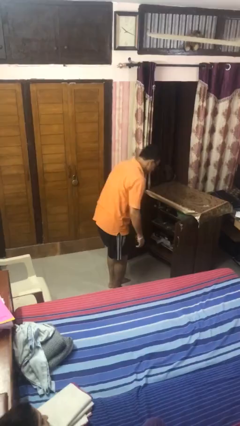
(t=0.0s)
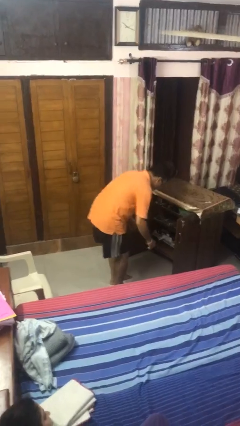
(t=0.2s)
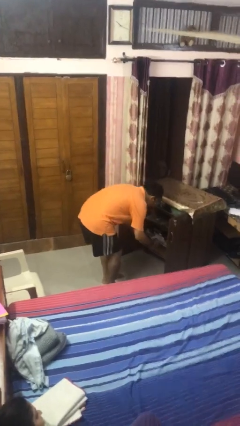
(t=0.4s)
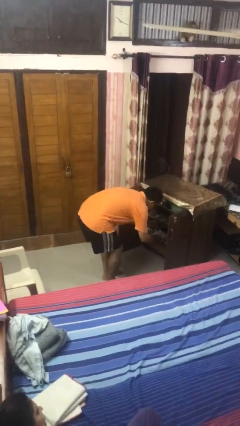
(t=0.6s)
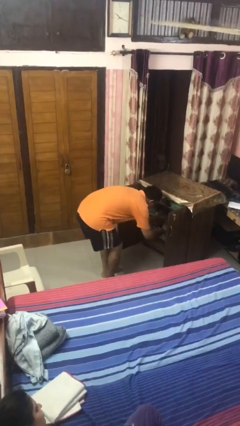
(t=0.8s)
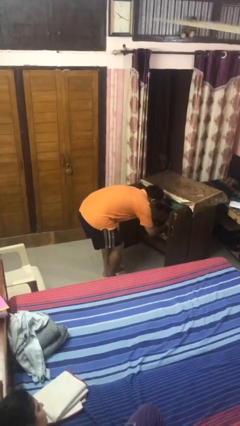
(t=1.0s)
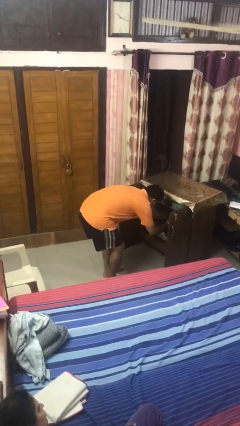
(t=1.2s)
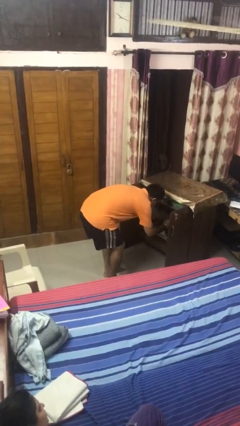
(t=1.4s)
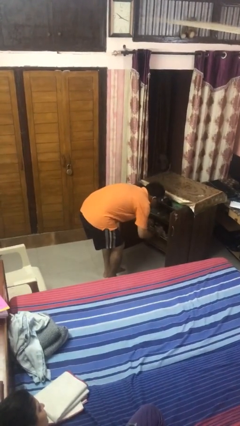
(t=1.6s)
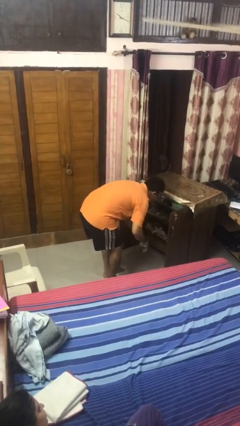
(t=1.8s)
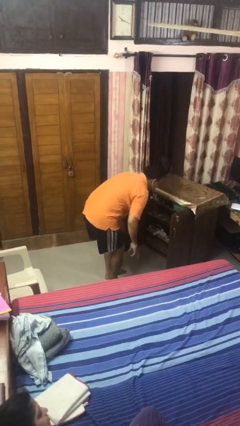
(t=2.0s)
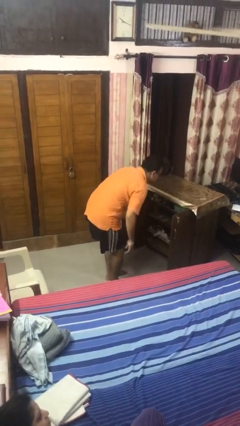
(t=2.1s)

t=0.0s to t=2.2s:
person searches in cabinet

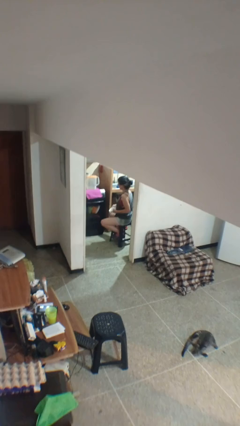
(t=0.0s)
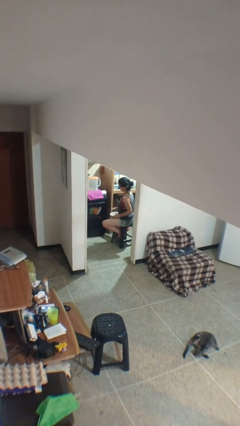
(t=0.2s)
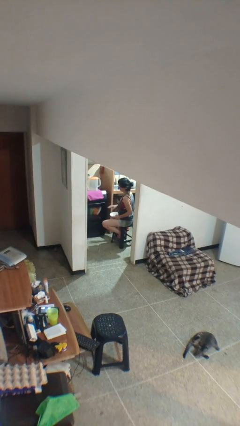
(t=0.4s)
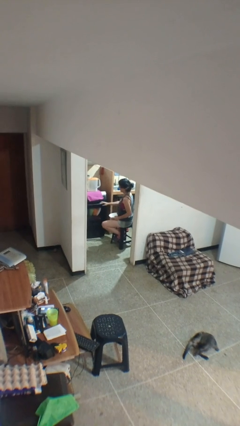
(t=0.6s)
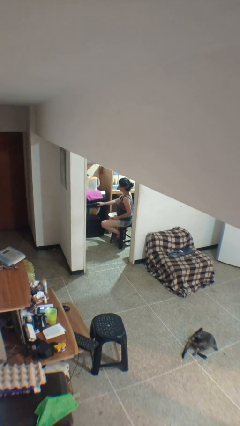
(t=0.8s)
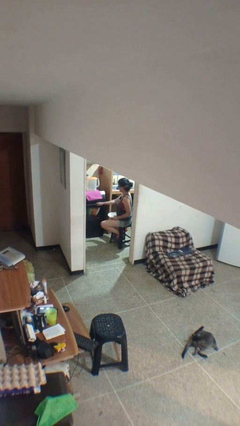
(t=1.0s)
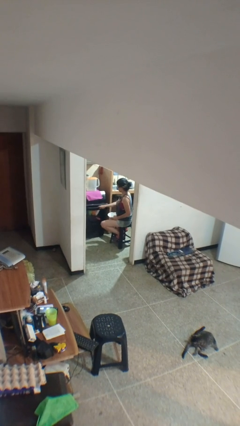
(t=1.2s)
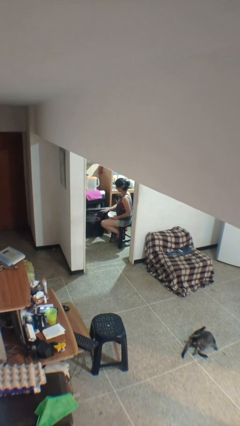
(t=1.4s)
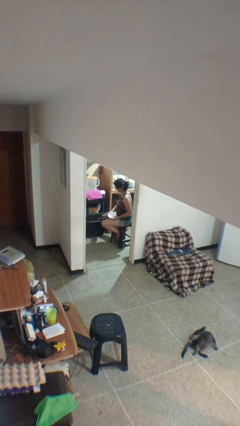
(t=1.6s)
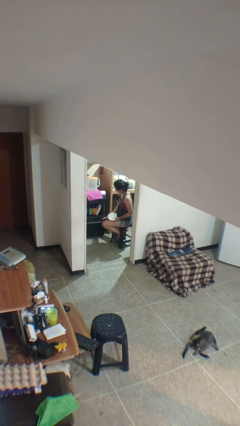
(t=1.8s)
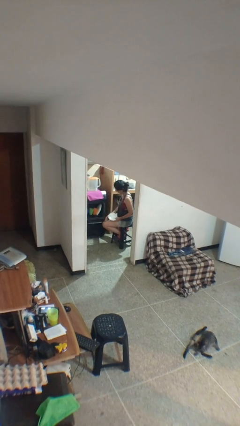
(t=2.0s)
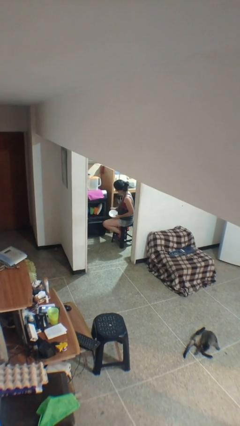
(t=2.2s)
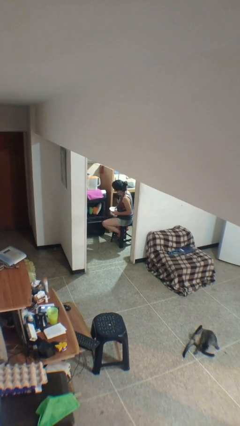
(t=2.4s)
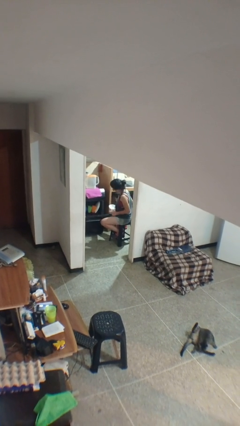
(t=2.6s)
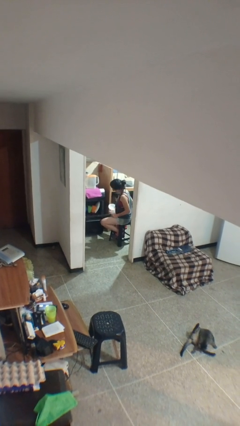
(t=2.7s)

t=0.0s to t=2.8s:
person opens dishwasher

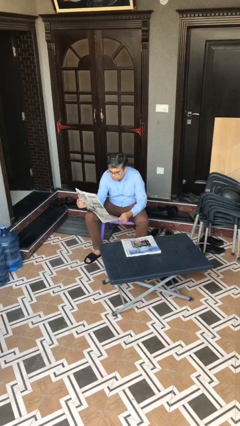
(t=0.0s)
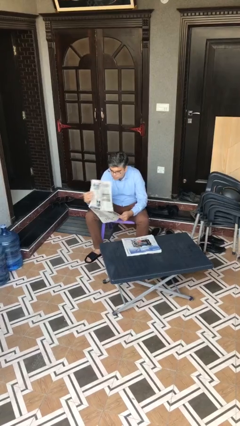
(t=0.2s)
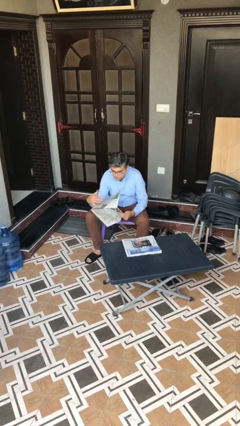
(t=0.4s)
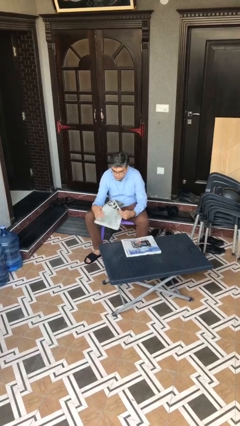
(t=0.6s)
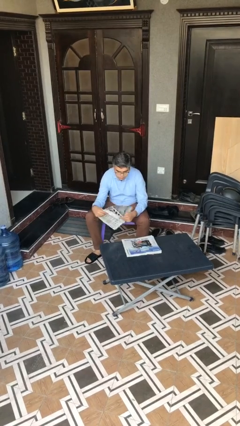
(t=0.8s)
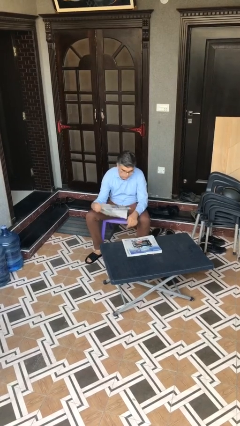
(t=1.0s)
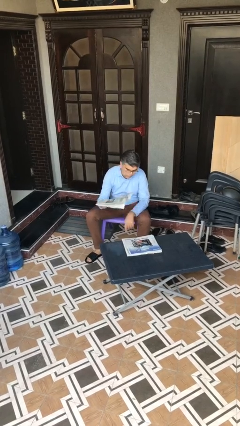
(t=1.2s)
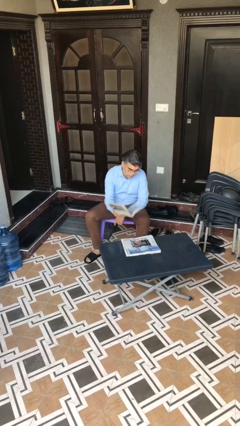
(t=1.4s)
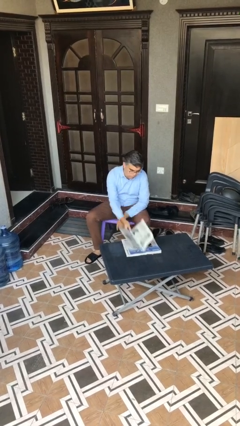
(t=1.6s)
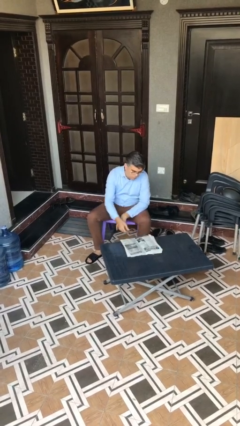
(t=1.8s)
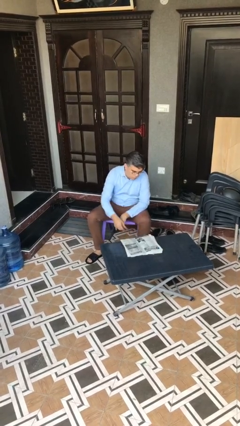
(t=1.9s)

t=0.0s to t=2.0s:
person puts down object on table

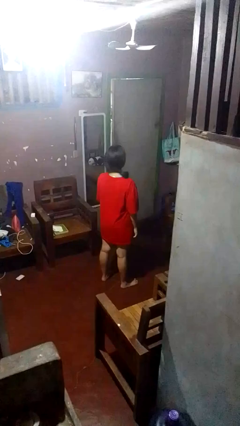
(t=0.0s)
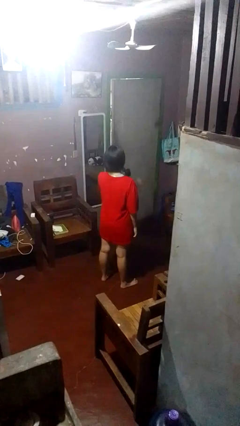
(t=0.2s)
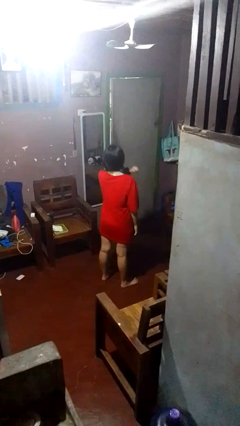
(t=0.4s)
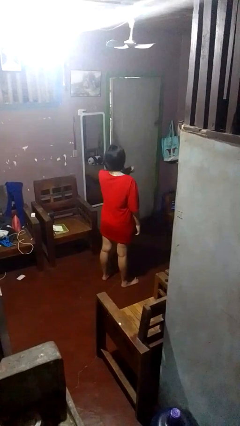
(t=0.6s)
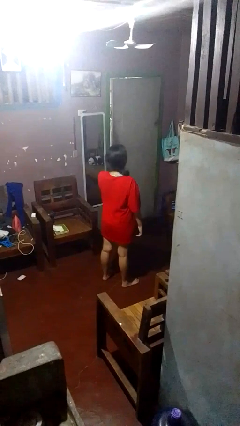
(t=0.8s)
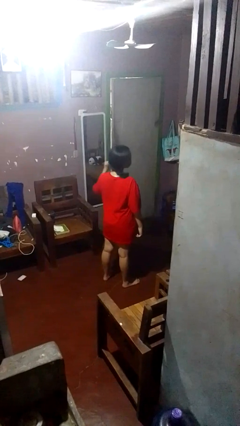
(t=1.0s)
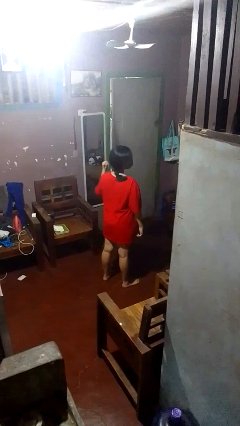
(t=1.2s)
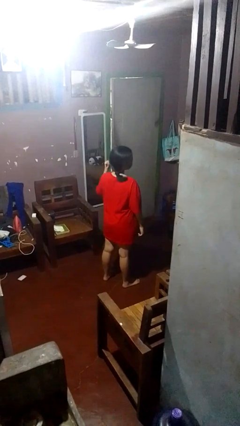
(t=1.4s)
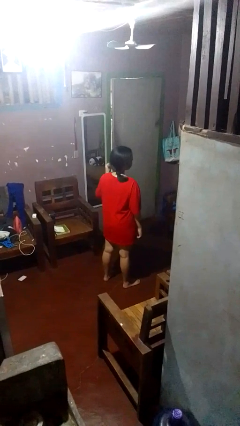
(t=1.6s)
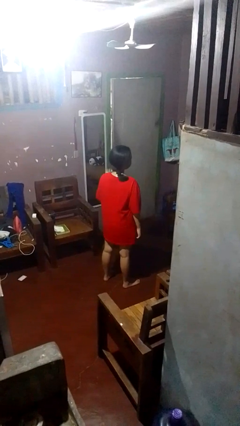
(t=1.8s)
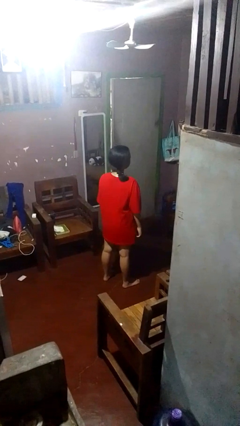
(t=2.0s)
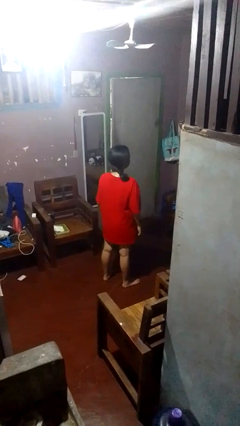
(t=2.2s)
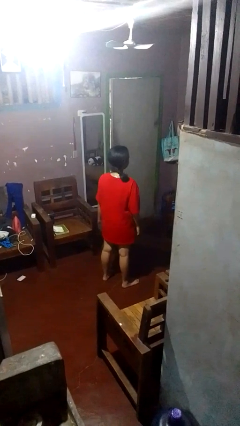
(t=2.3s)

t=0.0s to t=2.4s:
person gestures cut

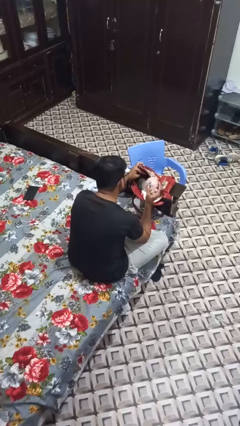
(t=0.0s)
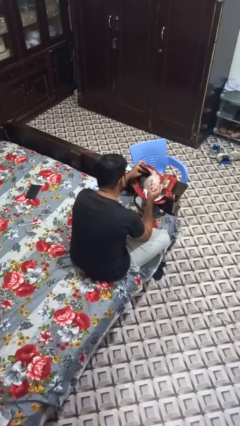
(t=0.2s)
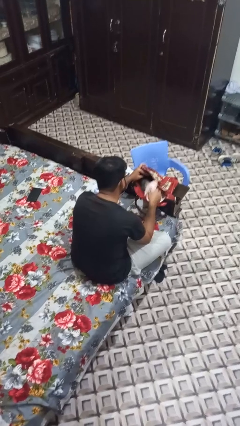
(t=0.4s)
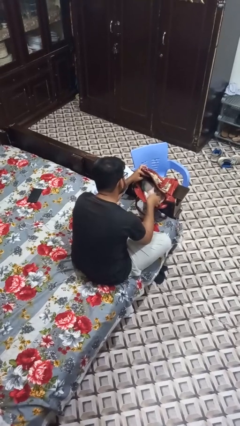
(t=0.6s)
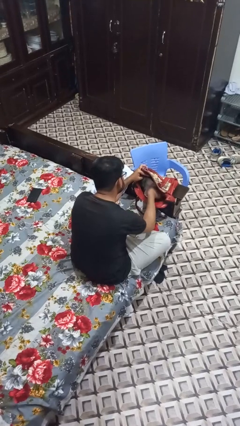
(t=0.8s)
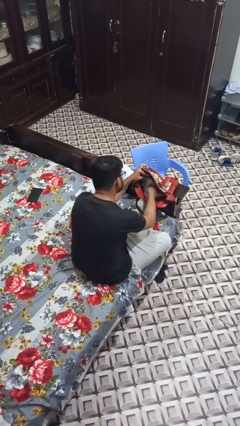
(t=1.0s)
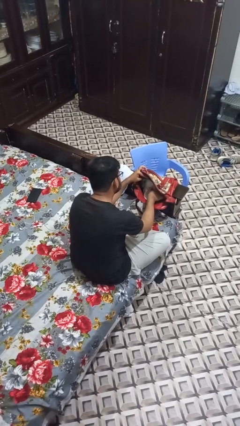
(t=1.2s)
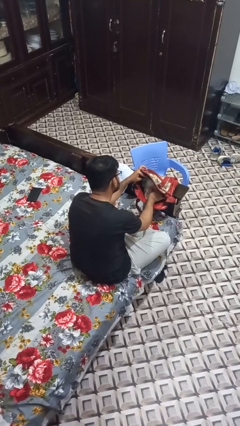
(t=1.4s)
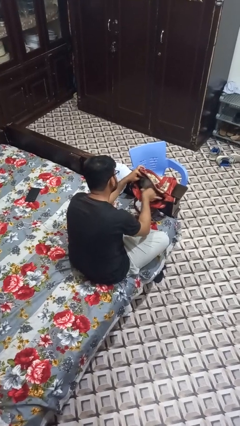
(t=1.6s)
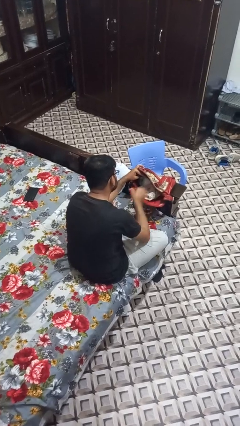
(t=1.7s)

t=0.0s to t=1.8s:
person puts object into purse

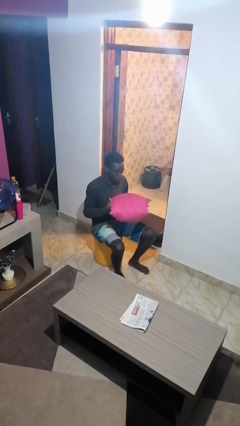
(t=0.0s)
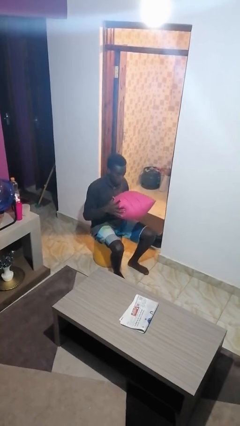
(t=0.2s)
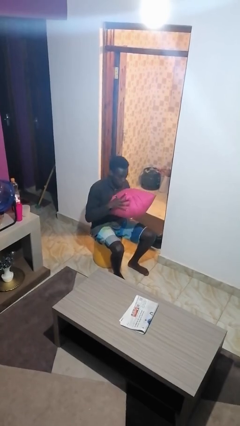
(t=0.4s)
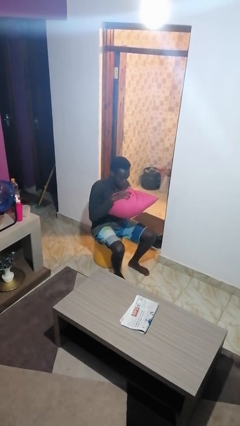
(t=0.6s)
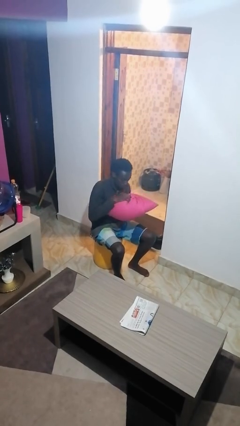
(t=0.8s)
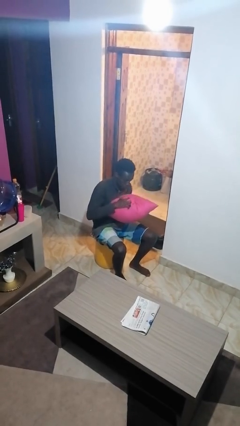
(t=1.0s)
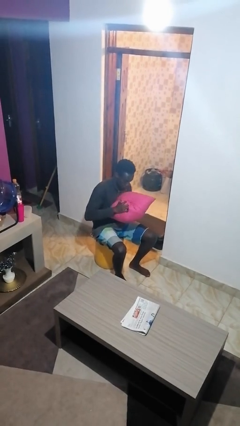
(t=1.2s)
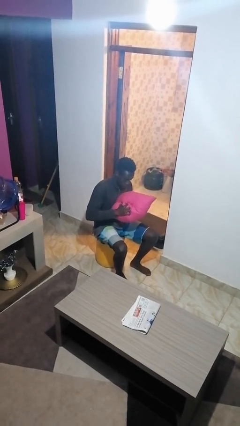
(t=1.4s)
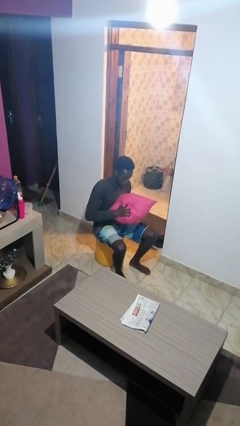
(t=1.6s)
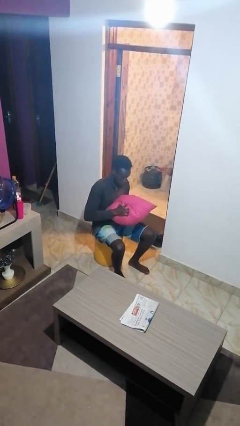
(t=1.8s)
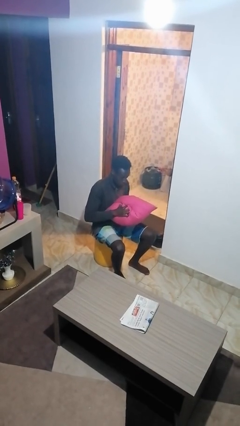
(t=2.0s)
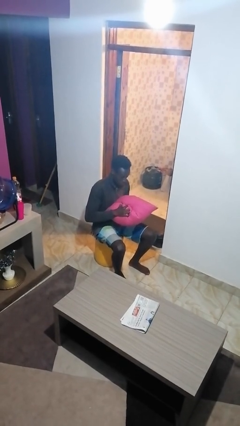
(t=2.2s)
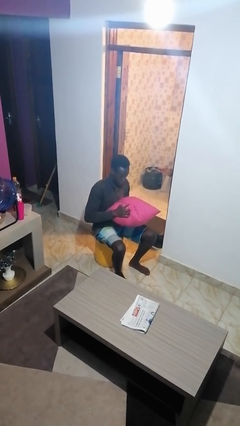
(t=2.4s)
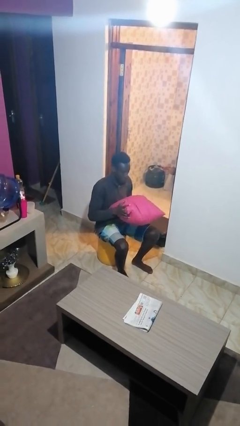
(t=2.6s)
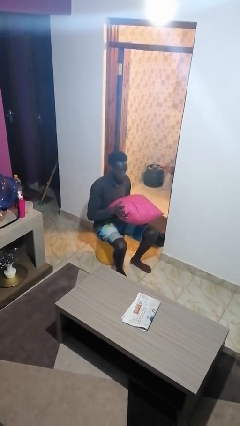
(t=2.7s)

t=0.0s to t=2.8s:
person squeezes object

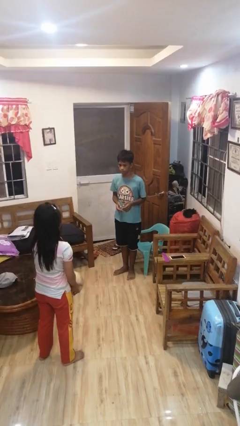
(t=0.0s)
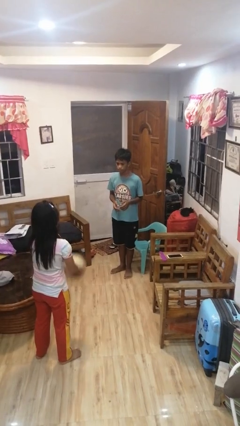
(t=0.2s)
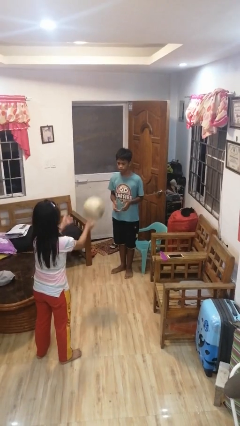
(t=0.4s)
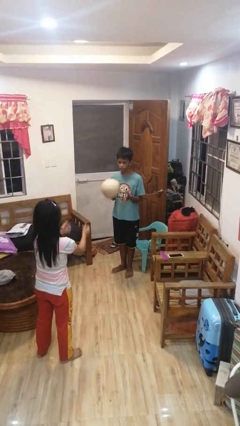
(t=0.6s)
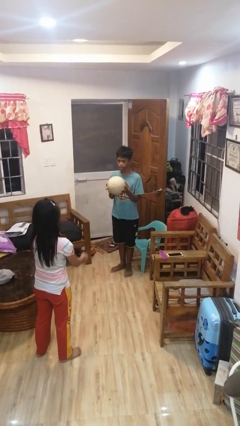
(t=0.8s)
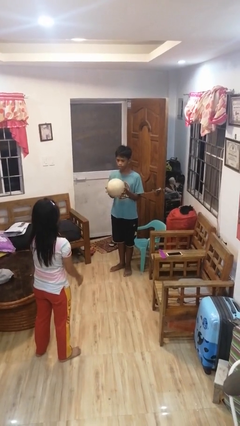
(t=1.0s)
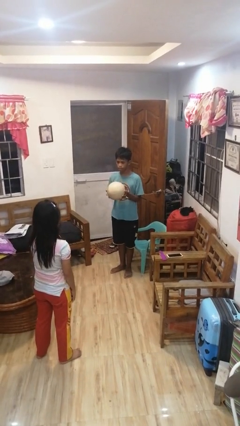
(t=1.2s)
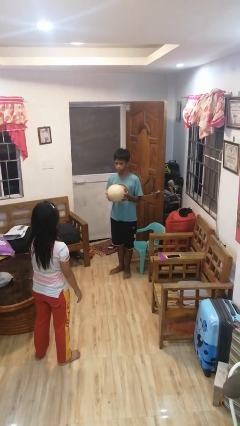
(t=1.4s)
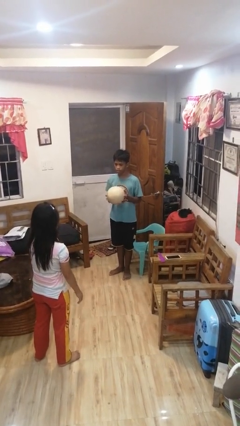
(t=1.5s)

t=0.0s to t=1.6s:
person catches object from person

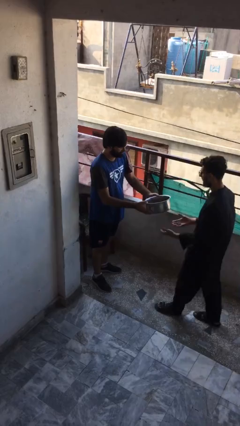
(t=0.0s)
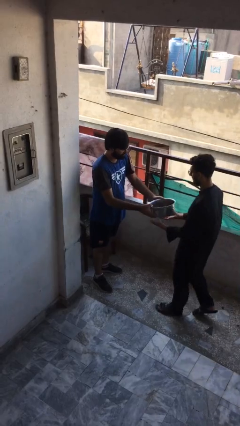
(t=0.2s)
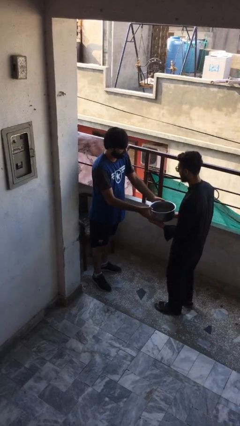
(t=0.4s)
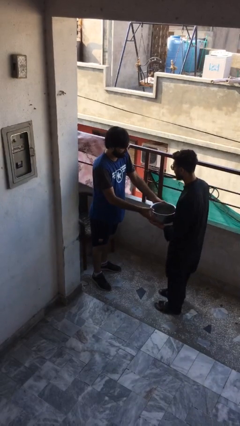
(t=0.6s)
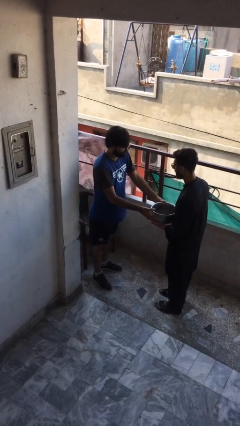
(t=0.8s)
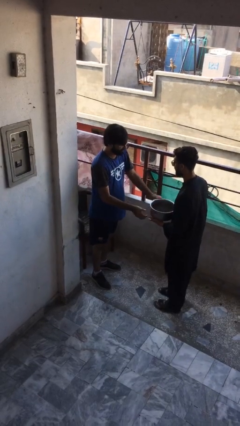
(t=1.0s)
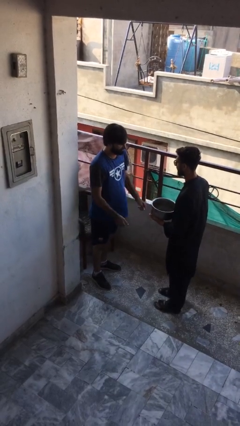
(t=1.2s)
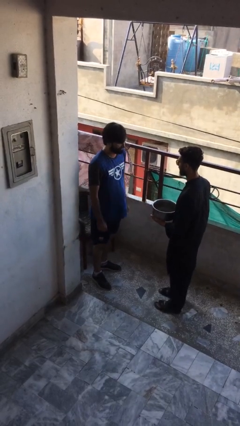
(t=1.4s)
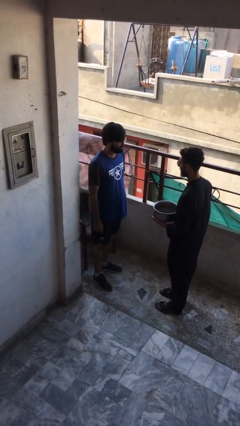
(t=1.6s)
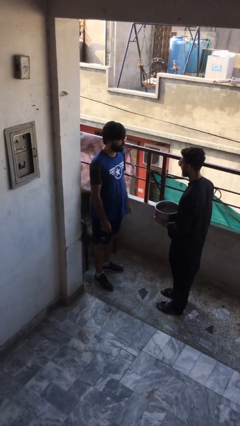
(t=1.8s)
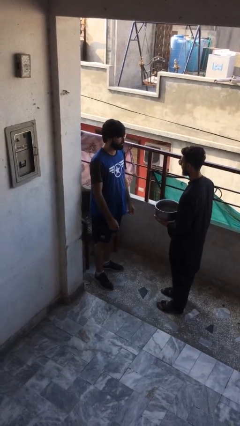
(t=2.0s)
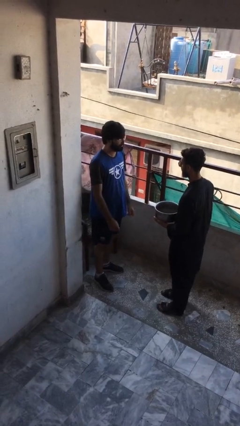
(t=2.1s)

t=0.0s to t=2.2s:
person transfers object to person
